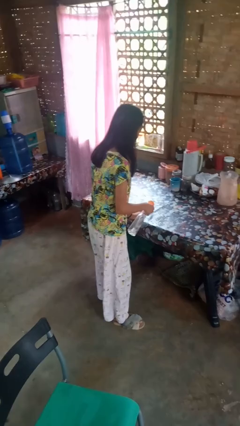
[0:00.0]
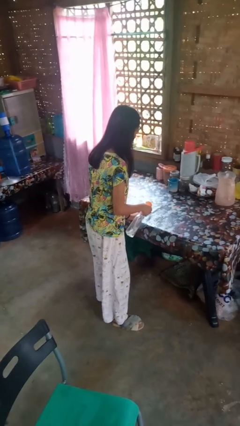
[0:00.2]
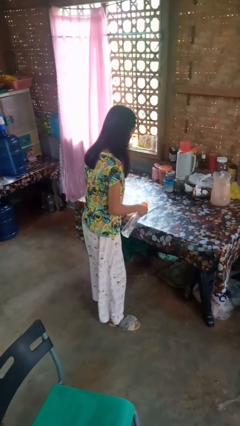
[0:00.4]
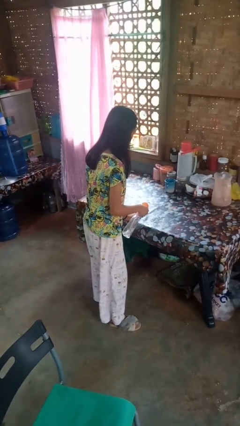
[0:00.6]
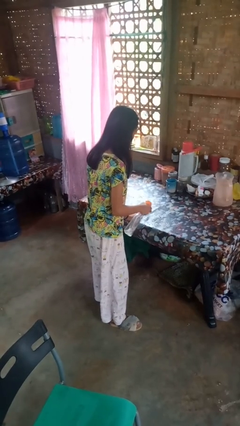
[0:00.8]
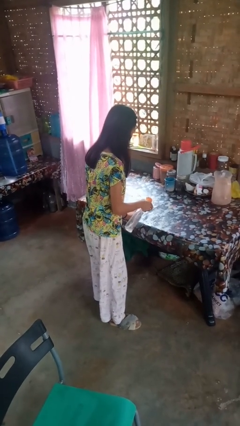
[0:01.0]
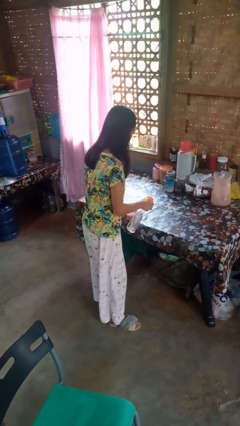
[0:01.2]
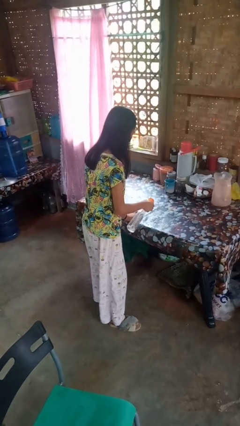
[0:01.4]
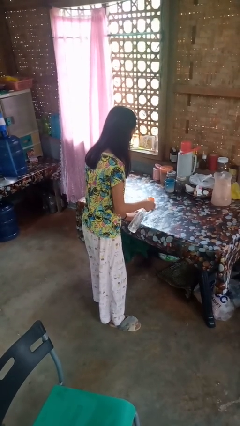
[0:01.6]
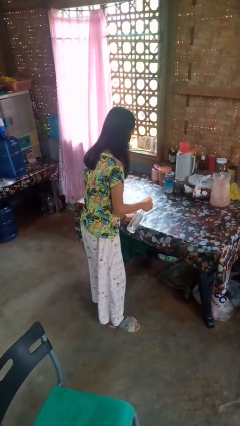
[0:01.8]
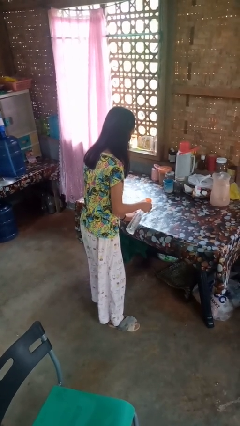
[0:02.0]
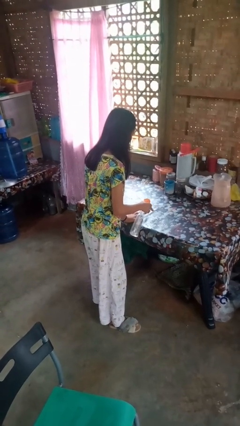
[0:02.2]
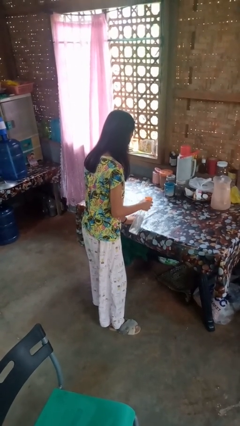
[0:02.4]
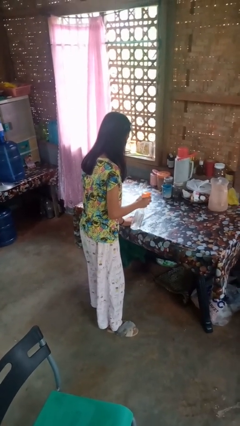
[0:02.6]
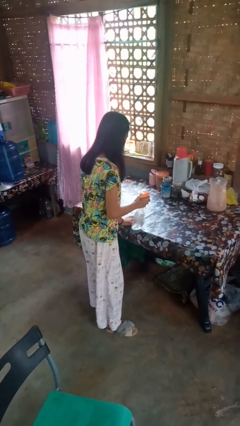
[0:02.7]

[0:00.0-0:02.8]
person sprays from bottle

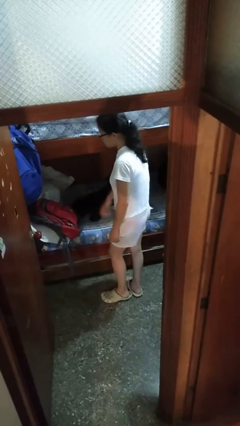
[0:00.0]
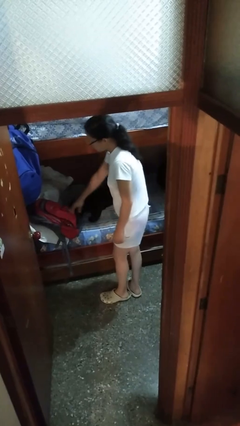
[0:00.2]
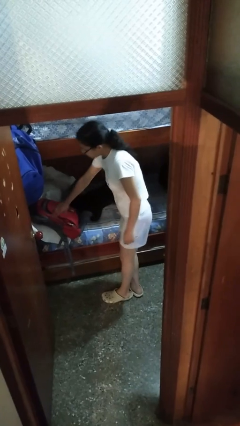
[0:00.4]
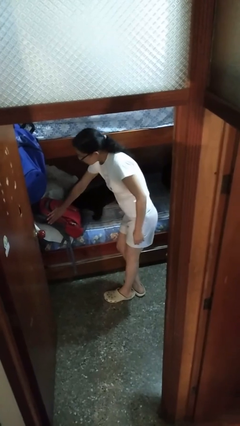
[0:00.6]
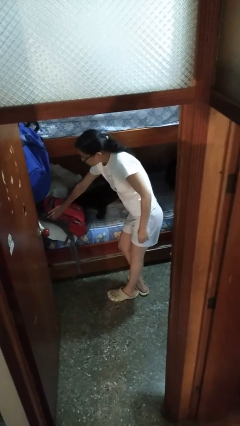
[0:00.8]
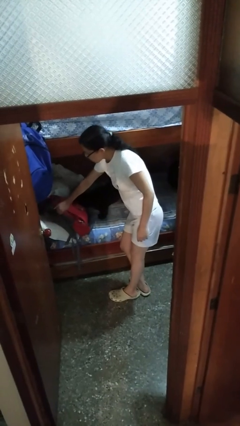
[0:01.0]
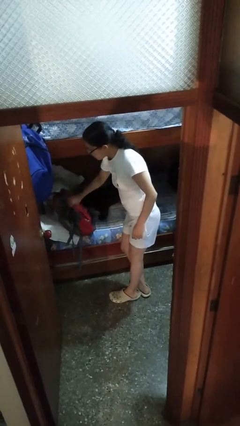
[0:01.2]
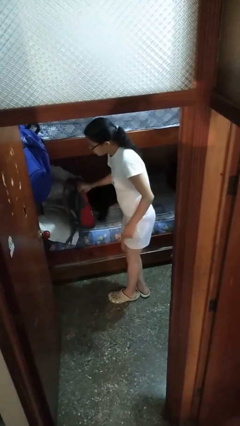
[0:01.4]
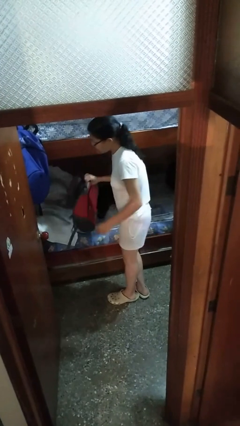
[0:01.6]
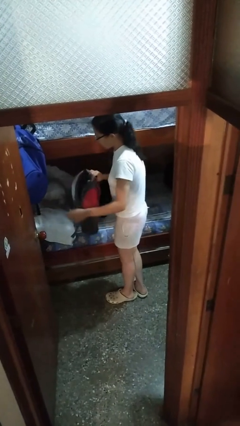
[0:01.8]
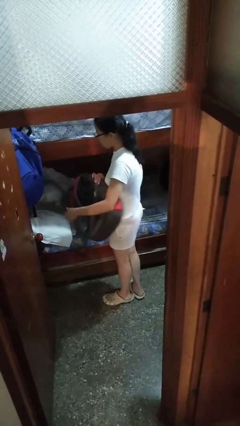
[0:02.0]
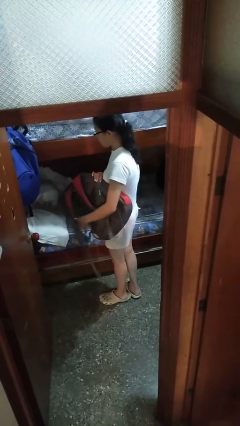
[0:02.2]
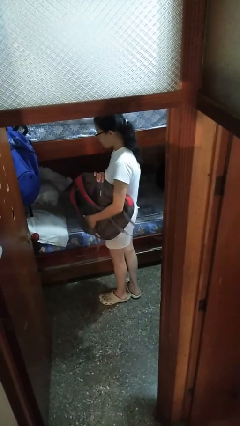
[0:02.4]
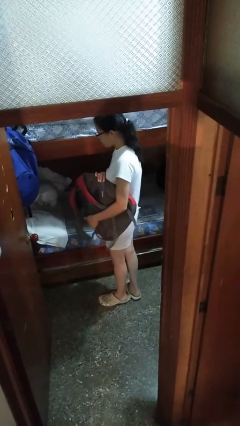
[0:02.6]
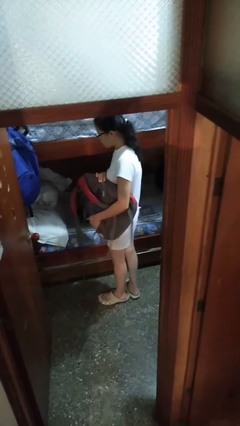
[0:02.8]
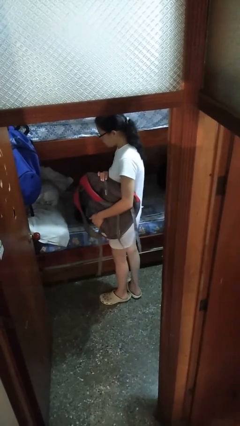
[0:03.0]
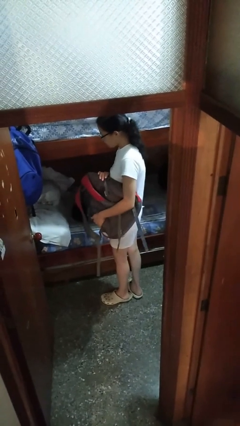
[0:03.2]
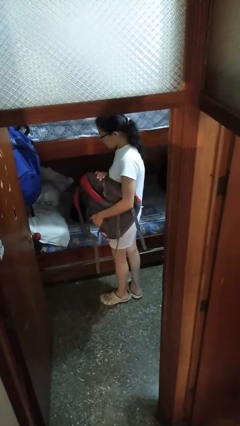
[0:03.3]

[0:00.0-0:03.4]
person picks up object from bed

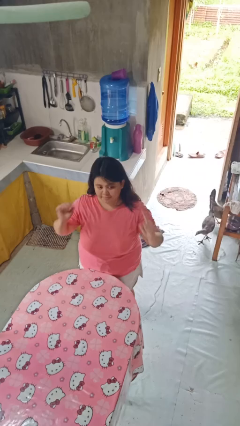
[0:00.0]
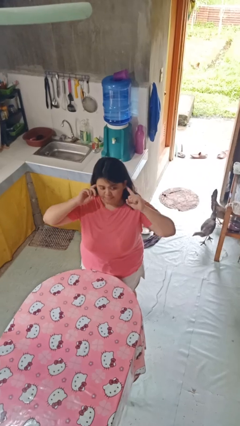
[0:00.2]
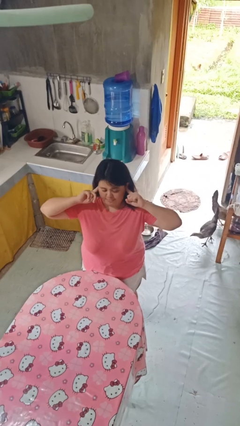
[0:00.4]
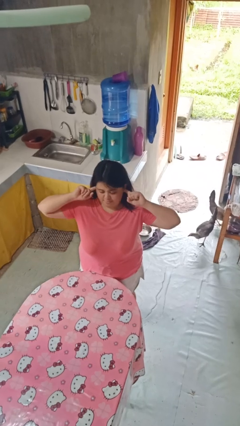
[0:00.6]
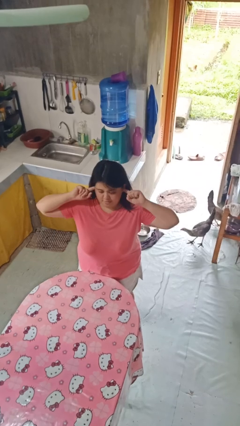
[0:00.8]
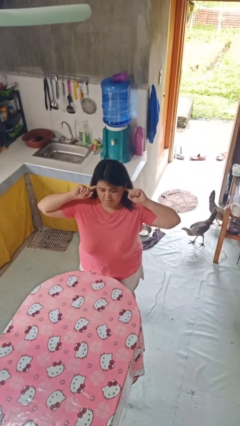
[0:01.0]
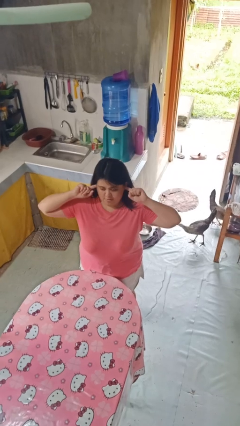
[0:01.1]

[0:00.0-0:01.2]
person puts fingers in ear

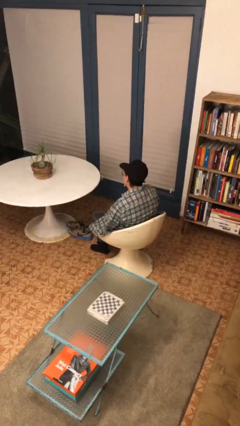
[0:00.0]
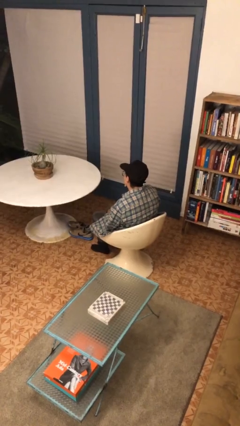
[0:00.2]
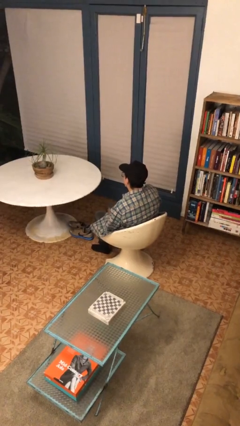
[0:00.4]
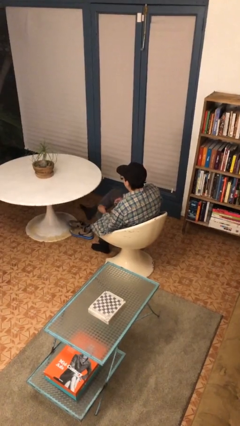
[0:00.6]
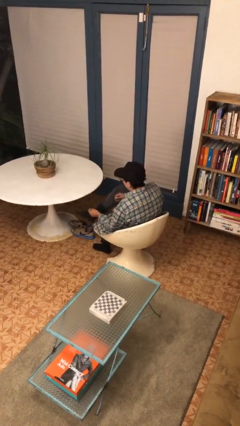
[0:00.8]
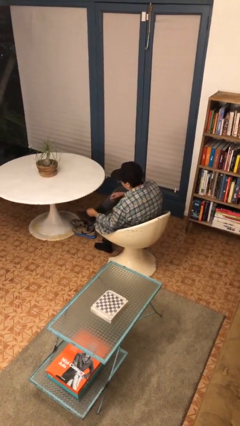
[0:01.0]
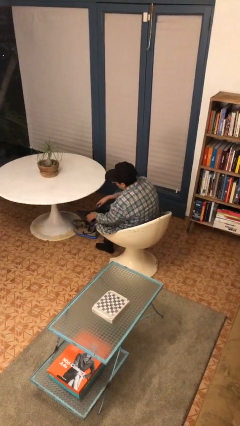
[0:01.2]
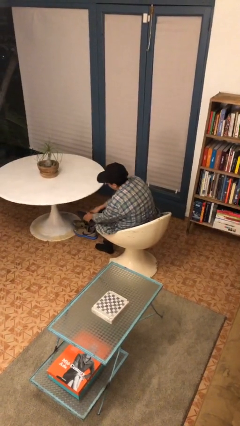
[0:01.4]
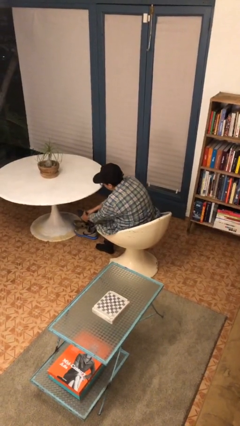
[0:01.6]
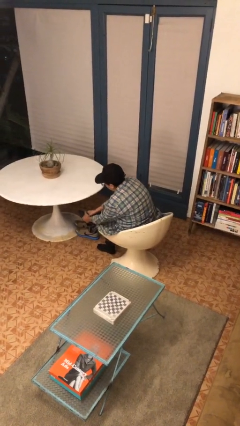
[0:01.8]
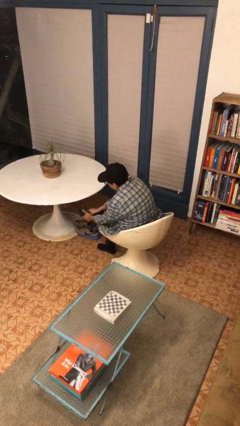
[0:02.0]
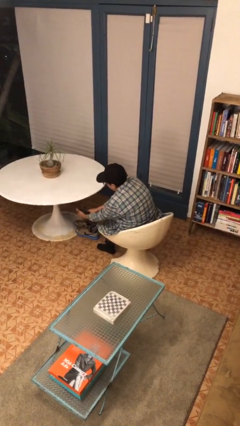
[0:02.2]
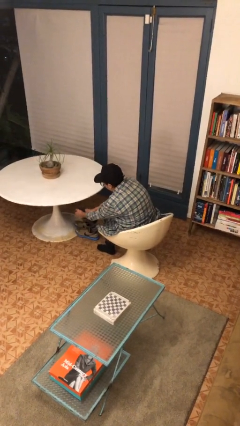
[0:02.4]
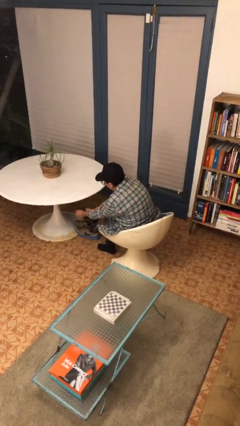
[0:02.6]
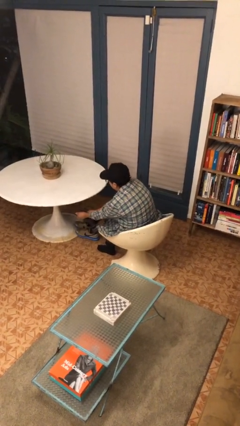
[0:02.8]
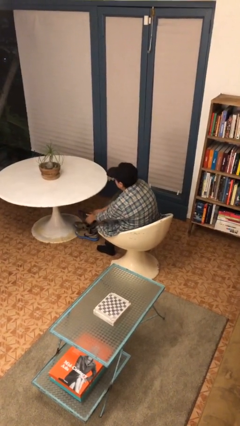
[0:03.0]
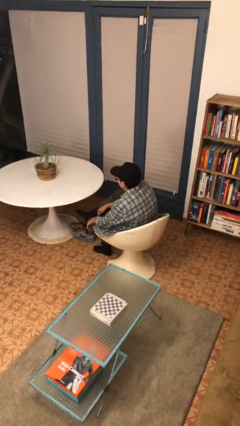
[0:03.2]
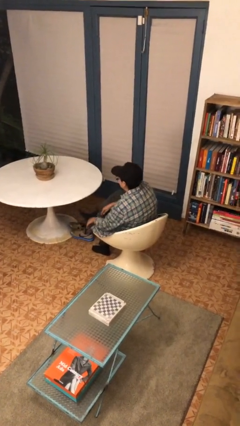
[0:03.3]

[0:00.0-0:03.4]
person rubs foot

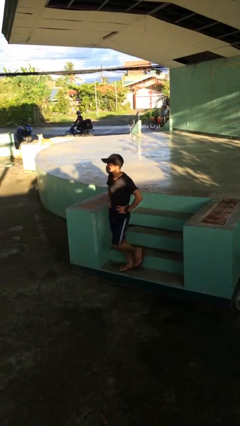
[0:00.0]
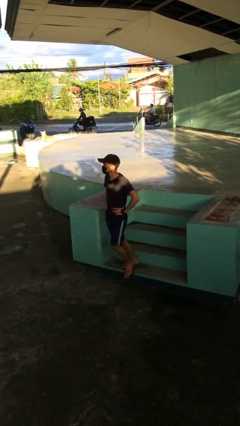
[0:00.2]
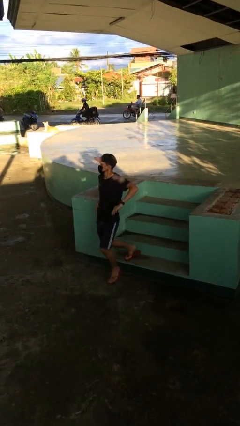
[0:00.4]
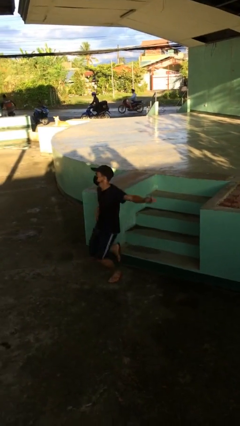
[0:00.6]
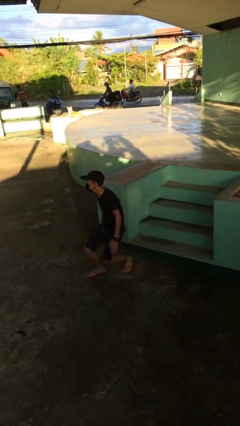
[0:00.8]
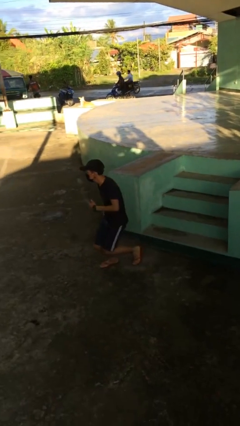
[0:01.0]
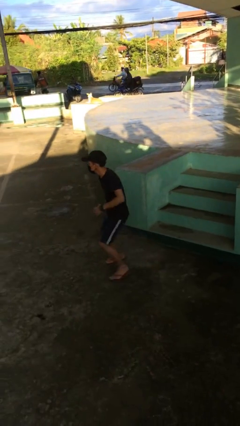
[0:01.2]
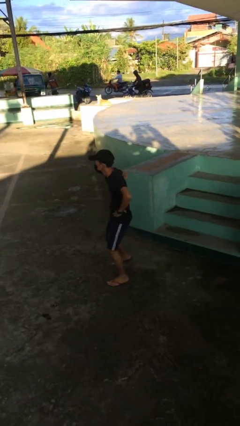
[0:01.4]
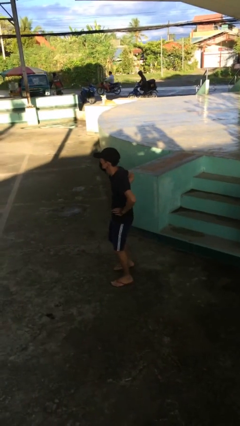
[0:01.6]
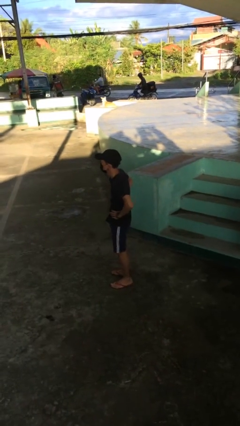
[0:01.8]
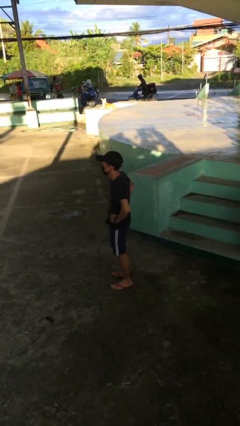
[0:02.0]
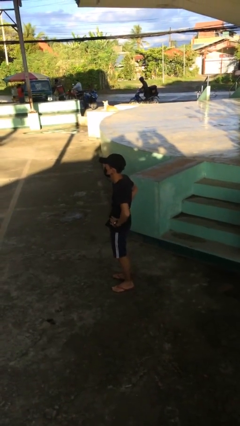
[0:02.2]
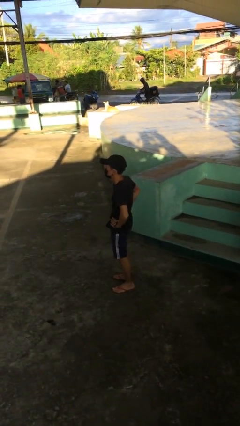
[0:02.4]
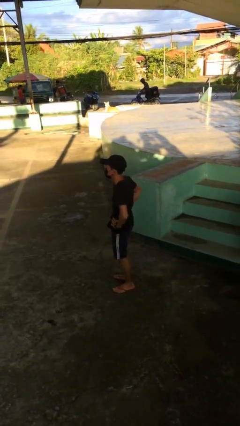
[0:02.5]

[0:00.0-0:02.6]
person trips on stair

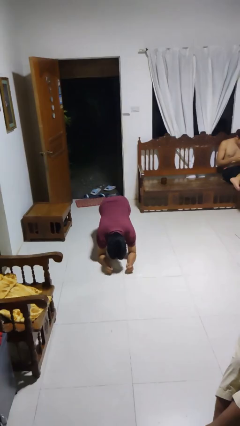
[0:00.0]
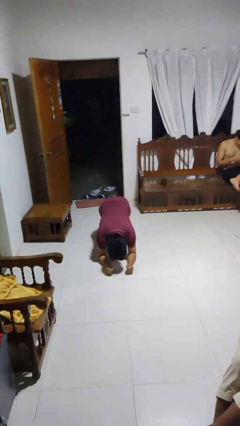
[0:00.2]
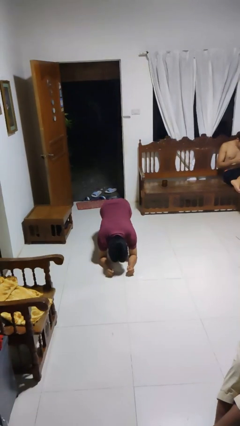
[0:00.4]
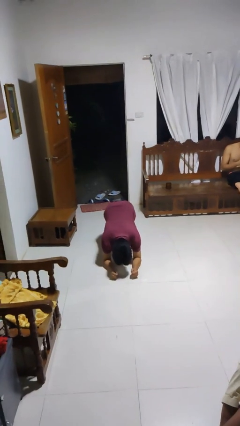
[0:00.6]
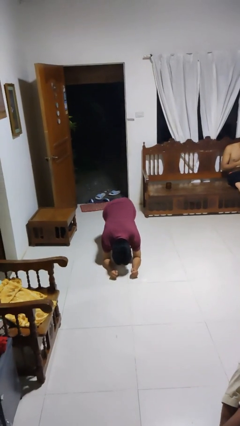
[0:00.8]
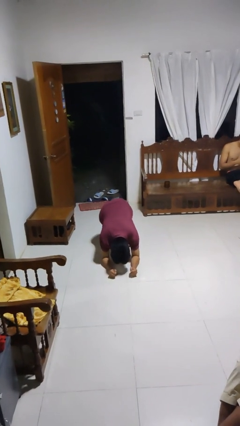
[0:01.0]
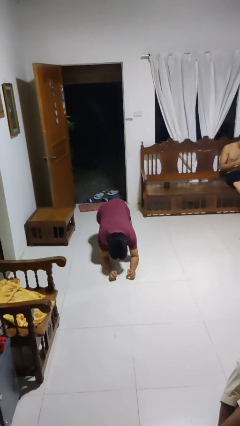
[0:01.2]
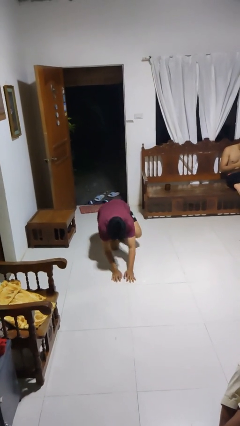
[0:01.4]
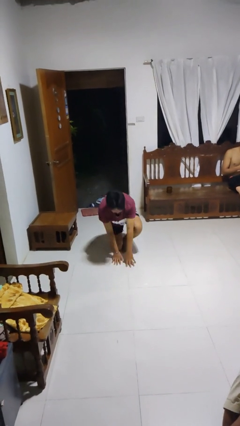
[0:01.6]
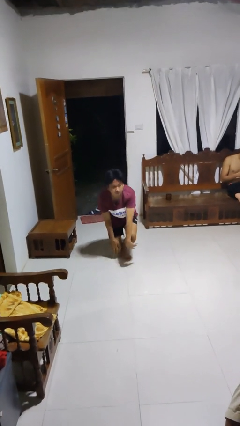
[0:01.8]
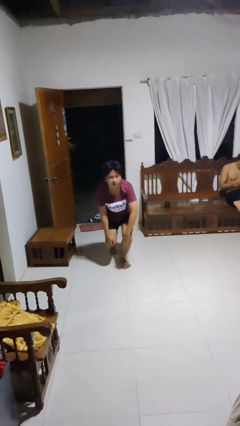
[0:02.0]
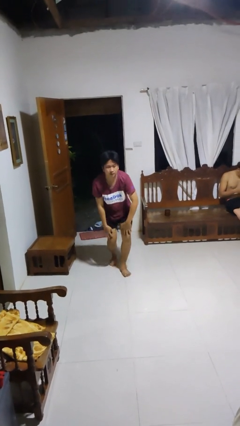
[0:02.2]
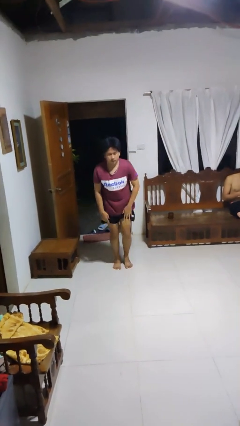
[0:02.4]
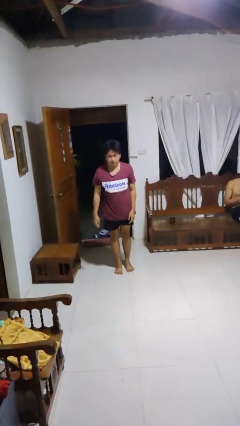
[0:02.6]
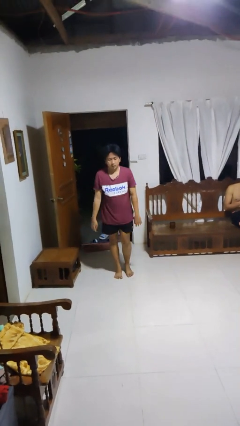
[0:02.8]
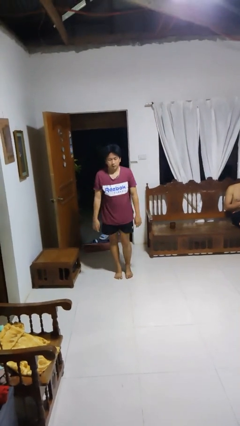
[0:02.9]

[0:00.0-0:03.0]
person stands up from floor

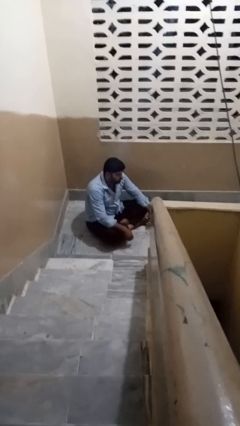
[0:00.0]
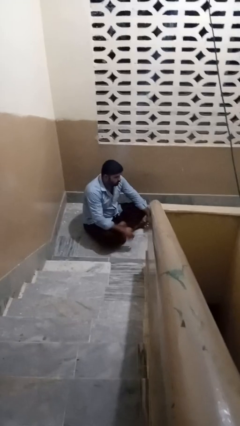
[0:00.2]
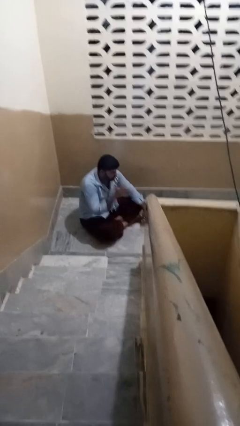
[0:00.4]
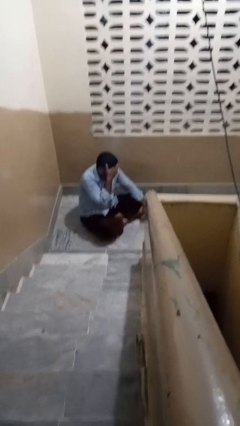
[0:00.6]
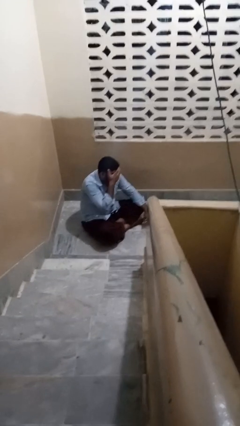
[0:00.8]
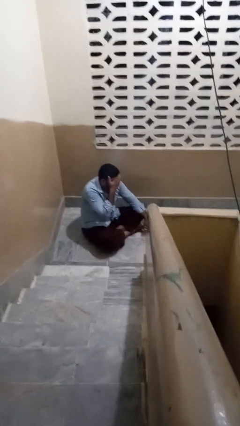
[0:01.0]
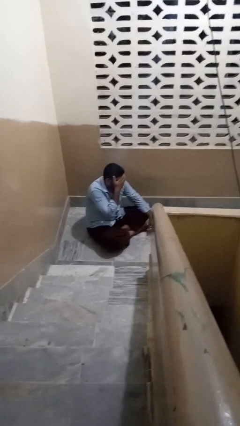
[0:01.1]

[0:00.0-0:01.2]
person covers face with hands
